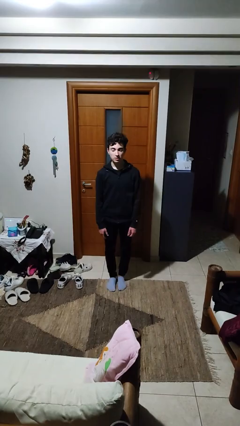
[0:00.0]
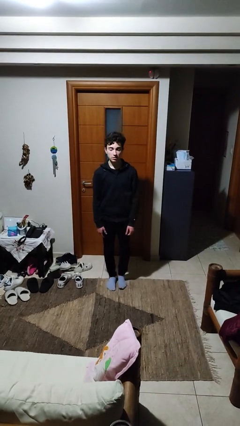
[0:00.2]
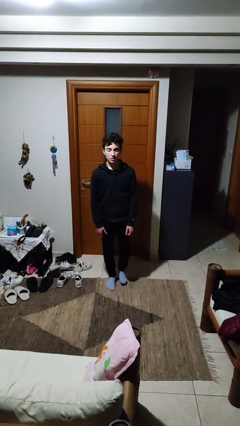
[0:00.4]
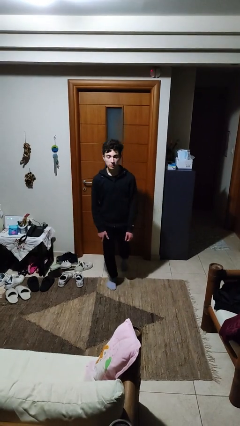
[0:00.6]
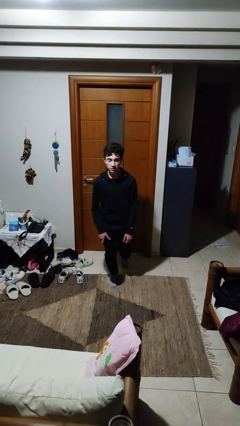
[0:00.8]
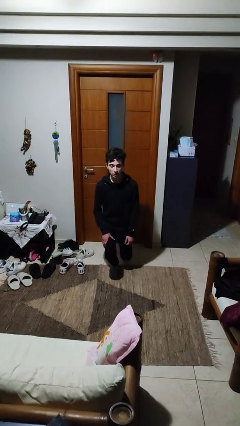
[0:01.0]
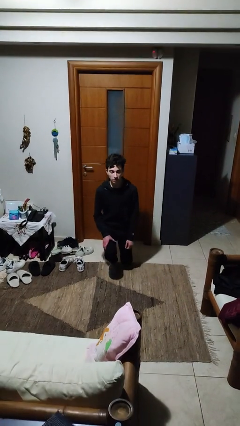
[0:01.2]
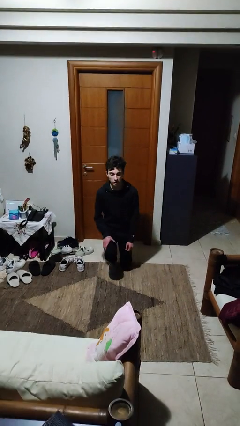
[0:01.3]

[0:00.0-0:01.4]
person kneels

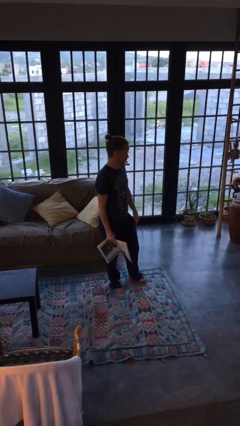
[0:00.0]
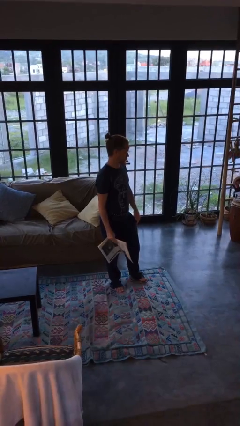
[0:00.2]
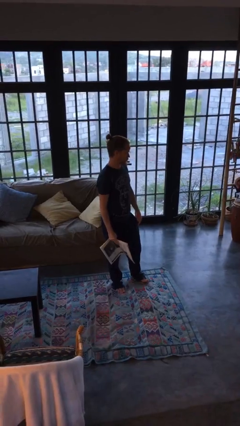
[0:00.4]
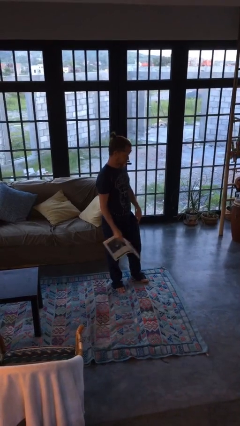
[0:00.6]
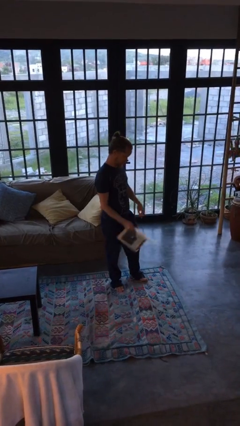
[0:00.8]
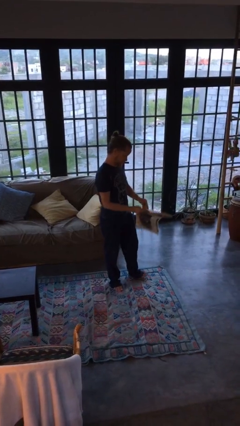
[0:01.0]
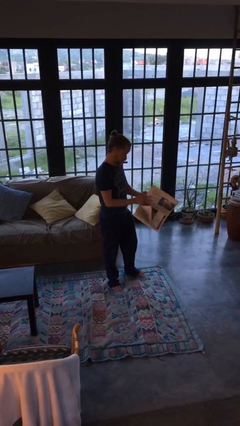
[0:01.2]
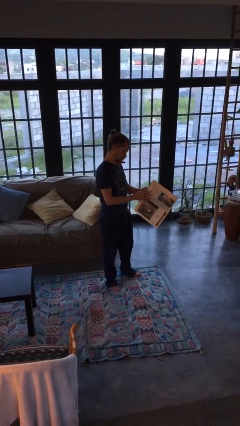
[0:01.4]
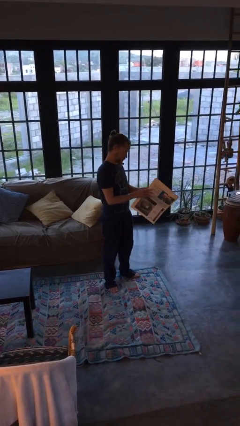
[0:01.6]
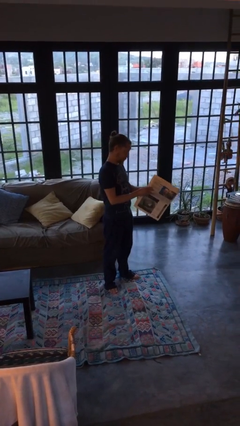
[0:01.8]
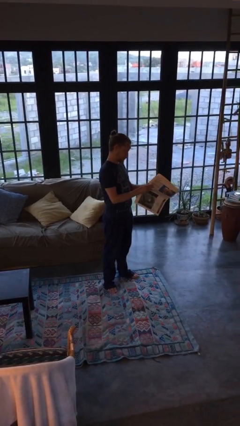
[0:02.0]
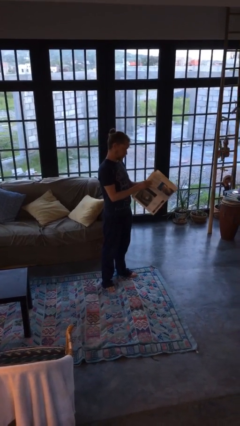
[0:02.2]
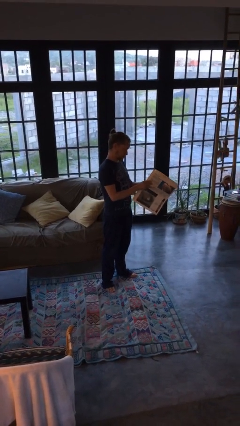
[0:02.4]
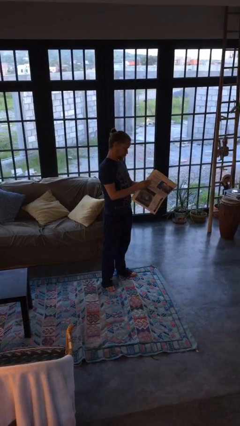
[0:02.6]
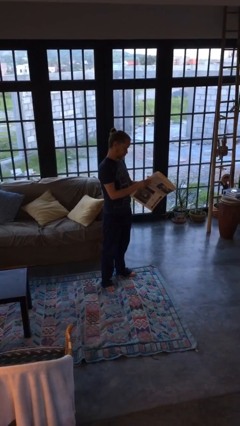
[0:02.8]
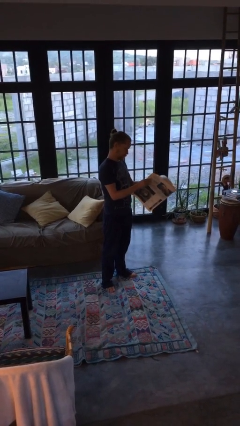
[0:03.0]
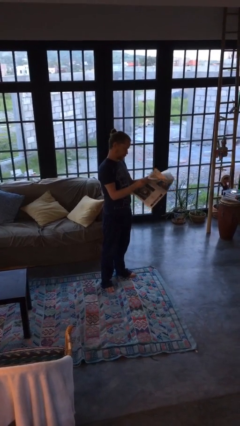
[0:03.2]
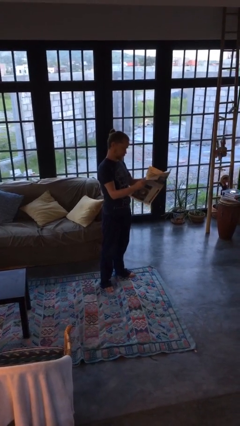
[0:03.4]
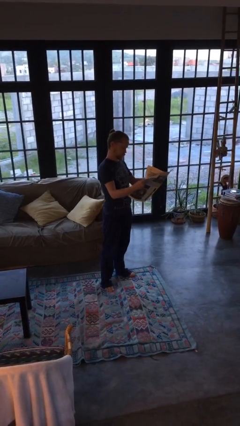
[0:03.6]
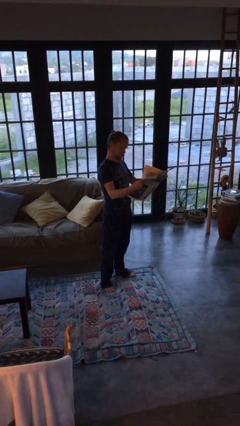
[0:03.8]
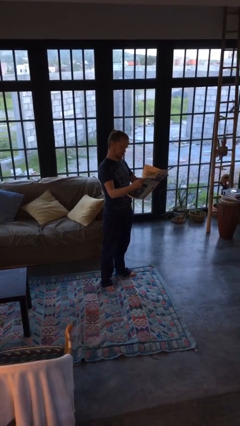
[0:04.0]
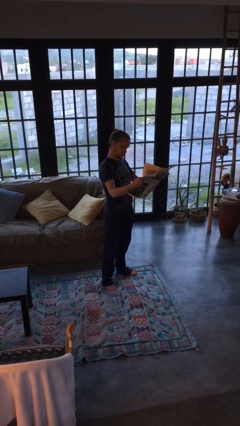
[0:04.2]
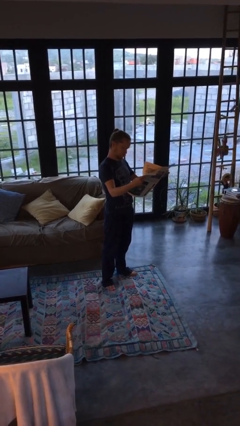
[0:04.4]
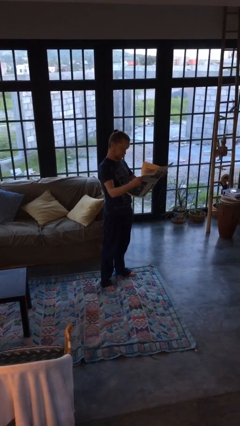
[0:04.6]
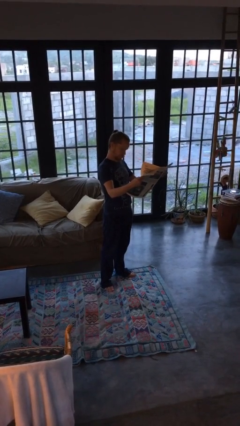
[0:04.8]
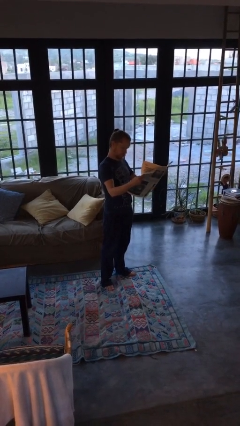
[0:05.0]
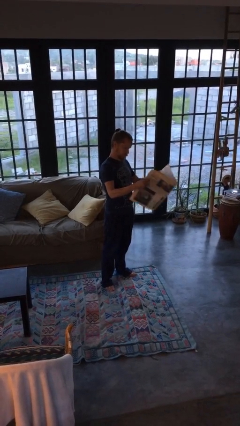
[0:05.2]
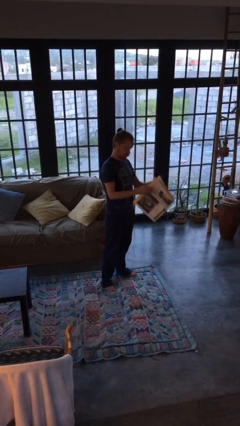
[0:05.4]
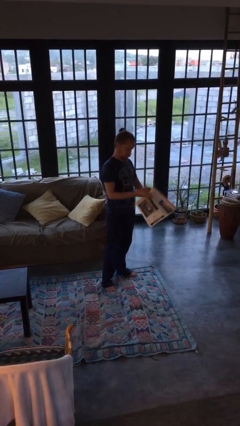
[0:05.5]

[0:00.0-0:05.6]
person reads newspaper

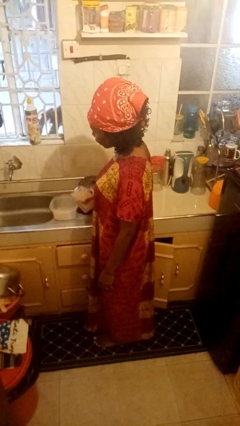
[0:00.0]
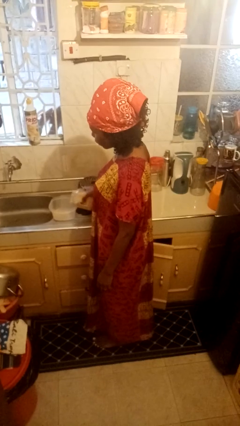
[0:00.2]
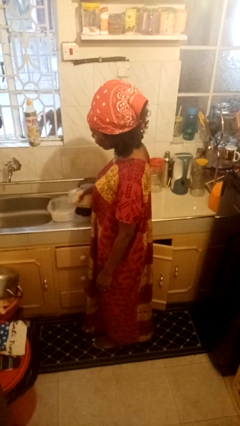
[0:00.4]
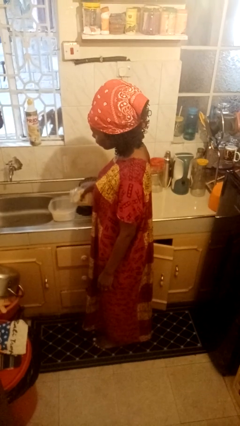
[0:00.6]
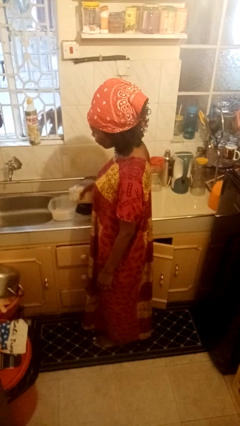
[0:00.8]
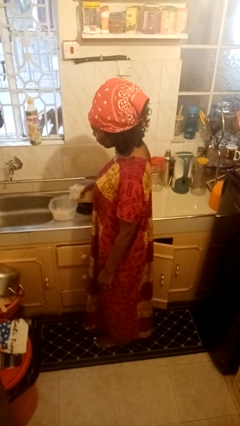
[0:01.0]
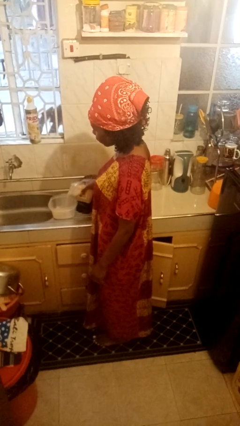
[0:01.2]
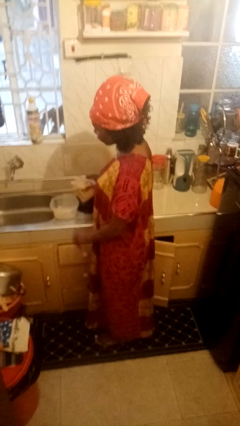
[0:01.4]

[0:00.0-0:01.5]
person pours into bowl

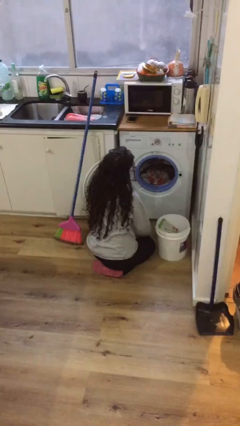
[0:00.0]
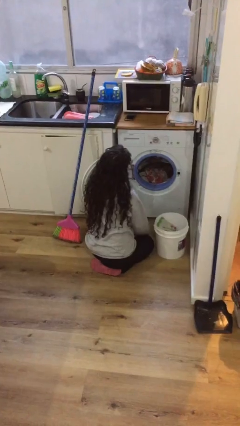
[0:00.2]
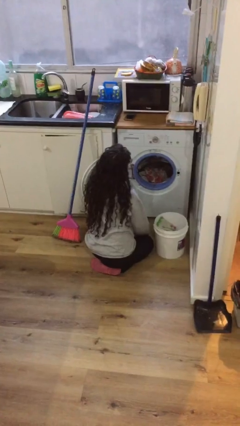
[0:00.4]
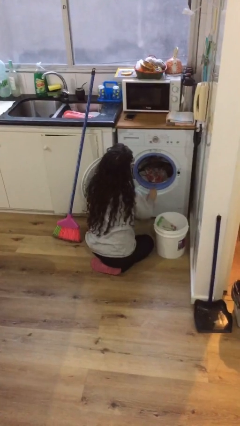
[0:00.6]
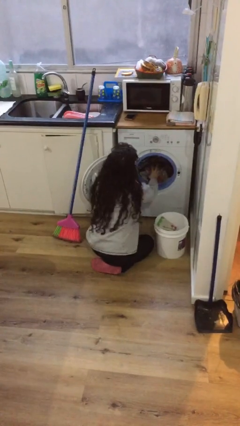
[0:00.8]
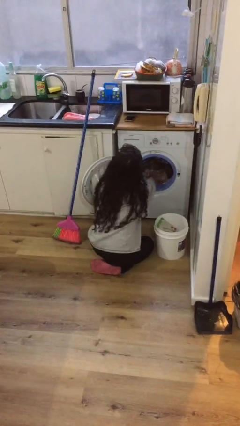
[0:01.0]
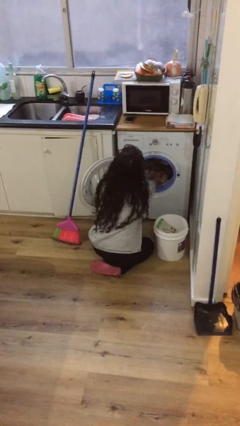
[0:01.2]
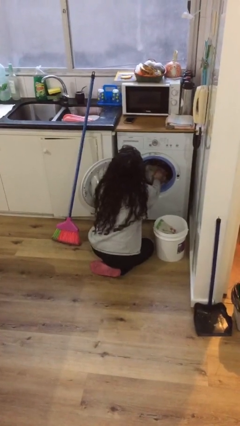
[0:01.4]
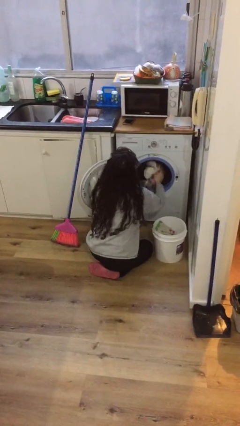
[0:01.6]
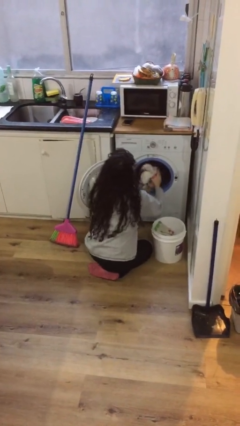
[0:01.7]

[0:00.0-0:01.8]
person unloads clotheswasher

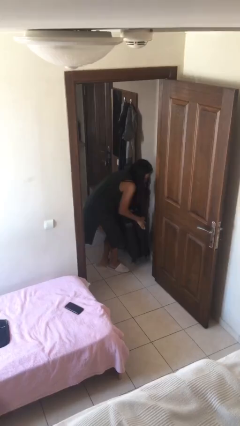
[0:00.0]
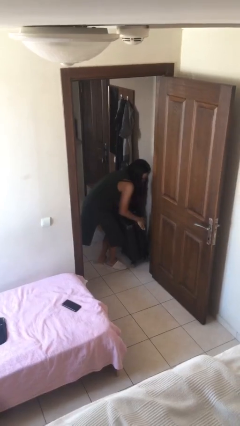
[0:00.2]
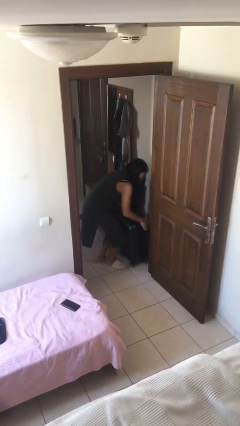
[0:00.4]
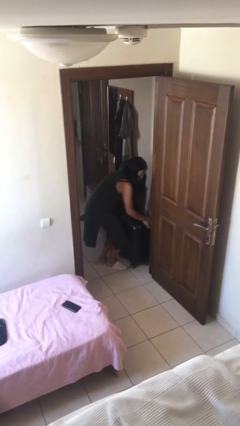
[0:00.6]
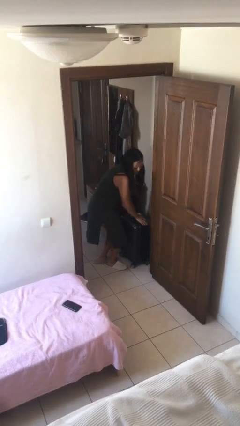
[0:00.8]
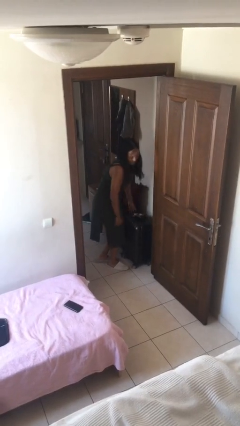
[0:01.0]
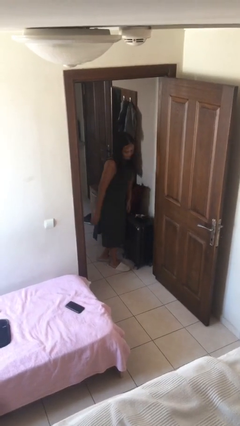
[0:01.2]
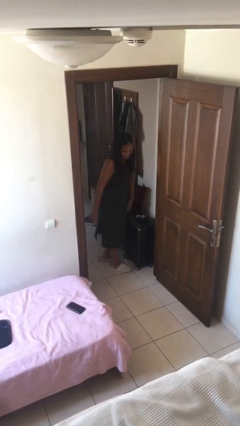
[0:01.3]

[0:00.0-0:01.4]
person puts down object on floor

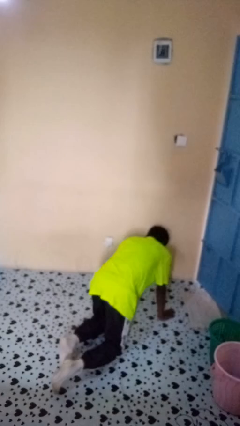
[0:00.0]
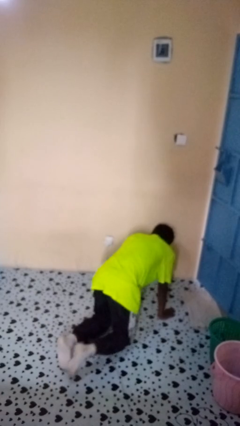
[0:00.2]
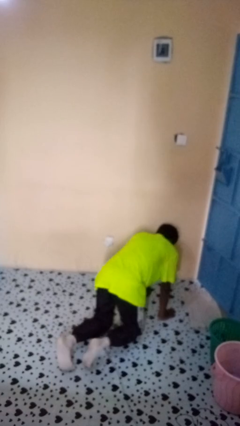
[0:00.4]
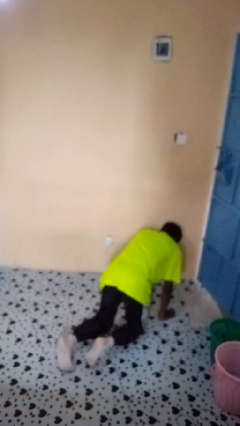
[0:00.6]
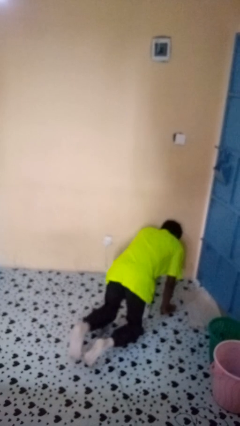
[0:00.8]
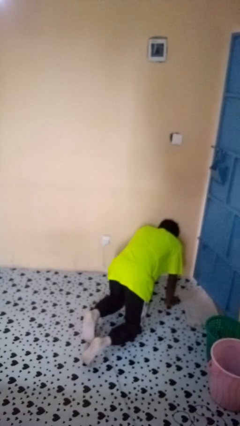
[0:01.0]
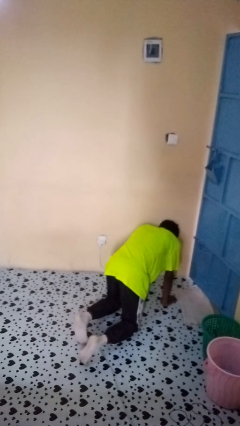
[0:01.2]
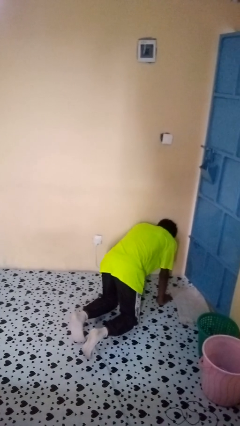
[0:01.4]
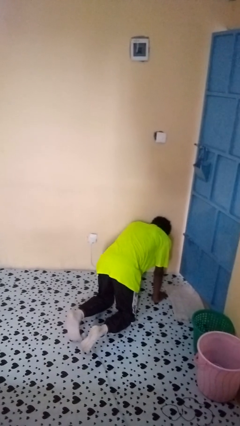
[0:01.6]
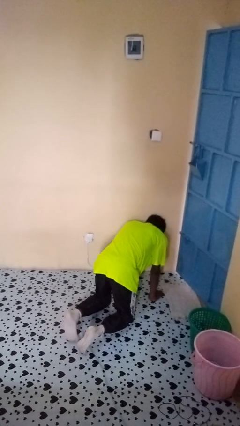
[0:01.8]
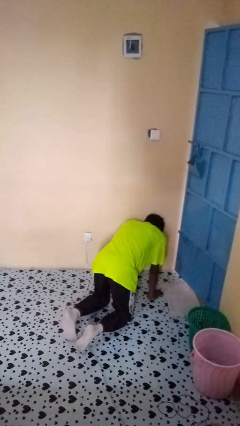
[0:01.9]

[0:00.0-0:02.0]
person crawls

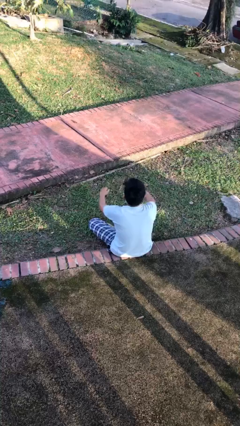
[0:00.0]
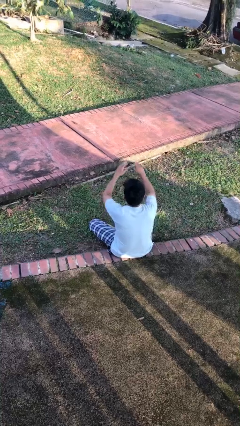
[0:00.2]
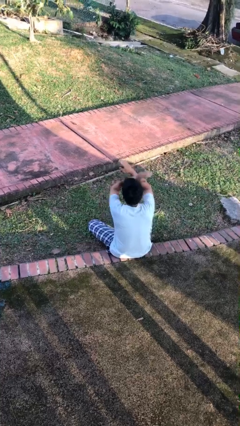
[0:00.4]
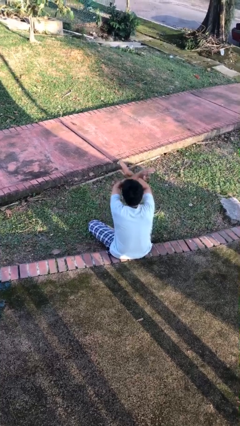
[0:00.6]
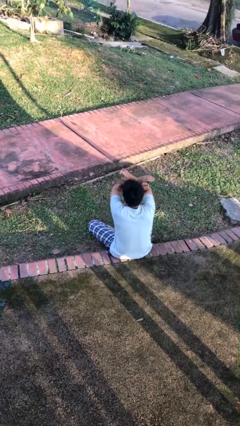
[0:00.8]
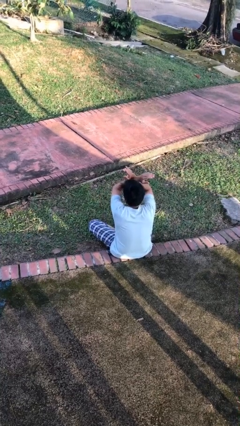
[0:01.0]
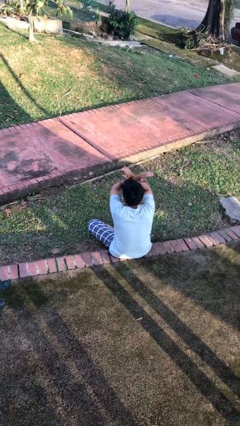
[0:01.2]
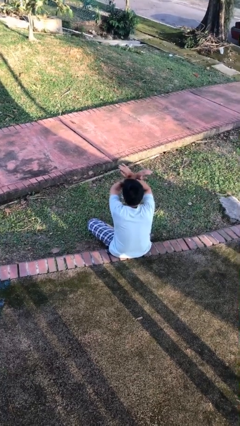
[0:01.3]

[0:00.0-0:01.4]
person gestures arms x

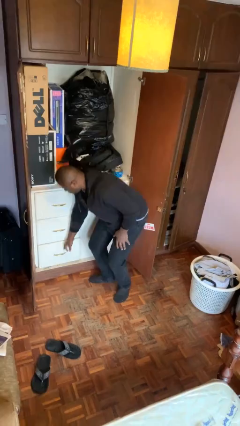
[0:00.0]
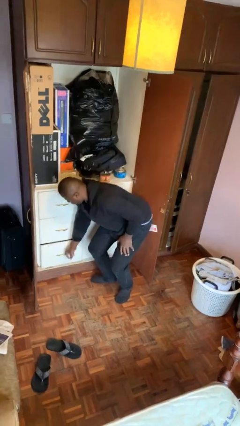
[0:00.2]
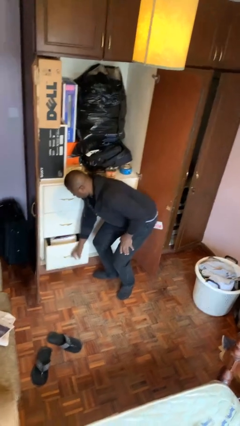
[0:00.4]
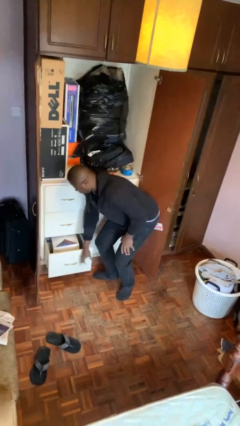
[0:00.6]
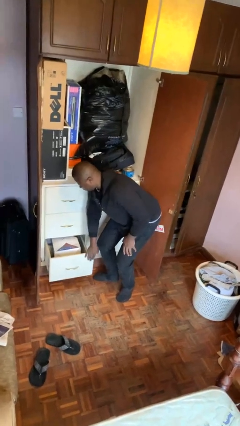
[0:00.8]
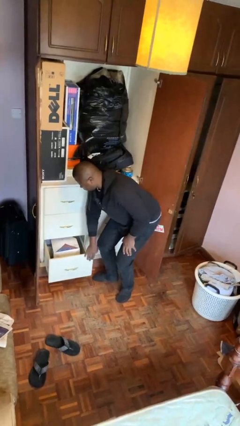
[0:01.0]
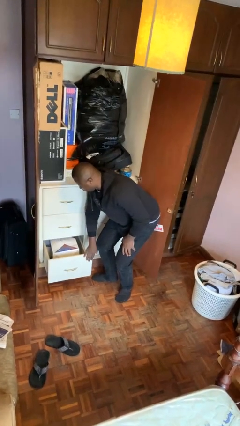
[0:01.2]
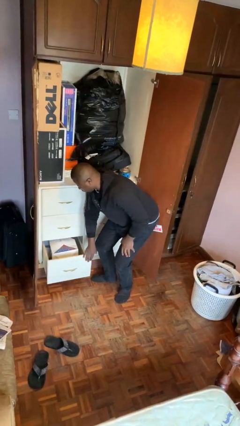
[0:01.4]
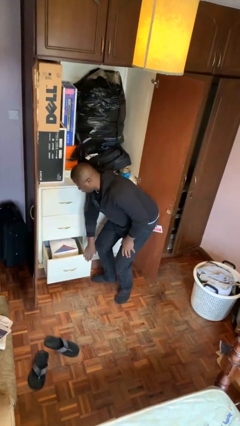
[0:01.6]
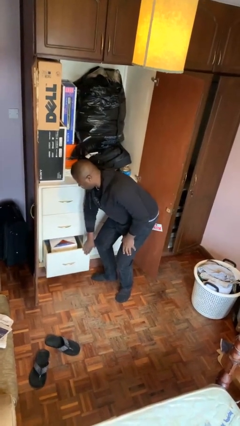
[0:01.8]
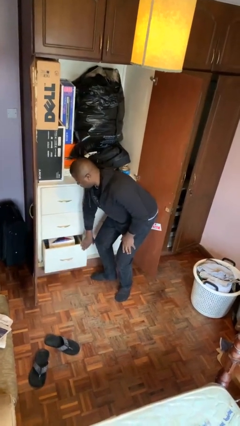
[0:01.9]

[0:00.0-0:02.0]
person opens dresser drawer
